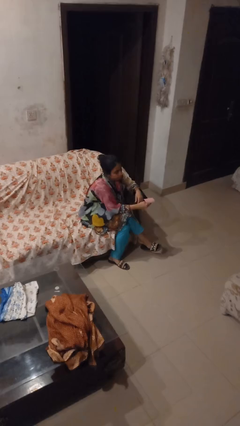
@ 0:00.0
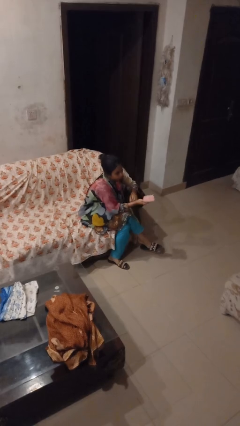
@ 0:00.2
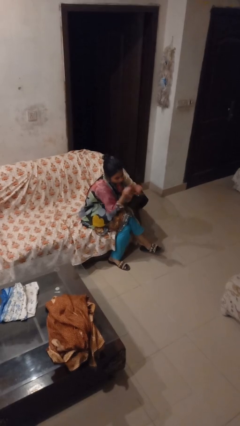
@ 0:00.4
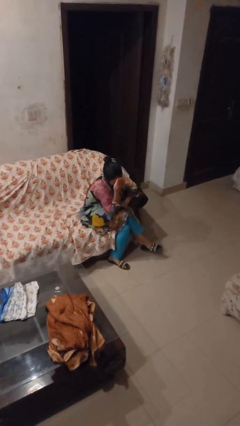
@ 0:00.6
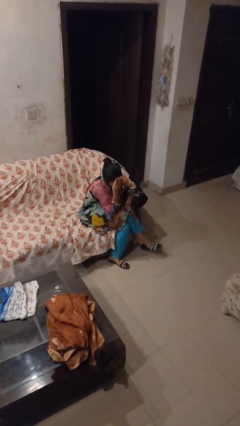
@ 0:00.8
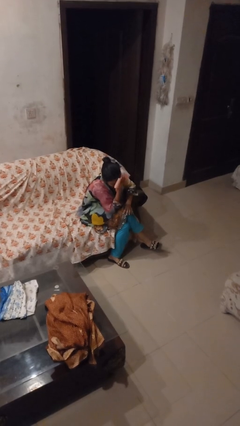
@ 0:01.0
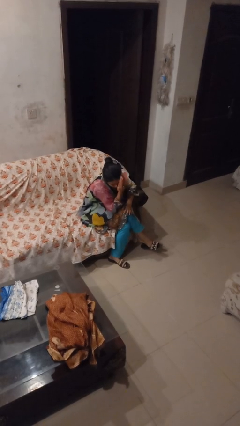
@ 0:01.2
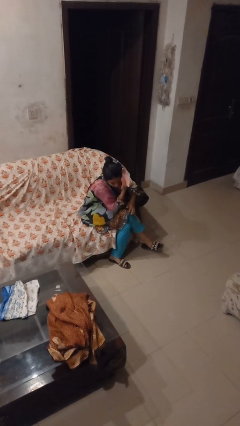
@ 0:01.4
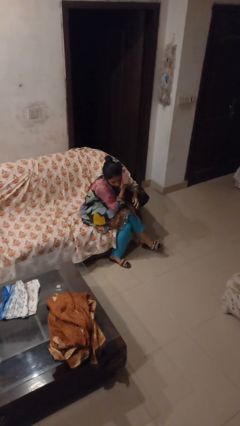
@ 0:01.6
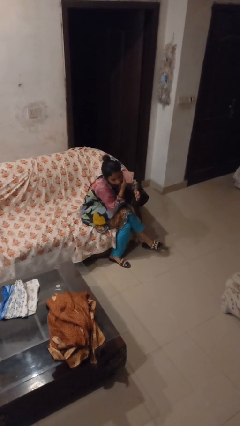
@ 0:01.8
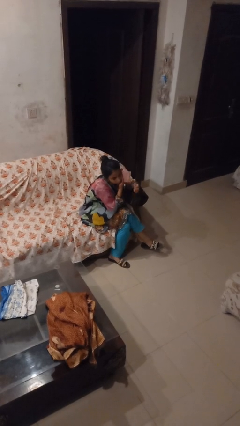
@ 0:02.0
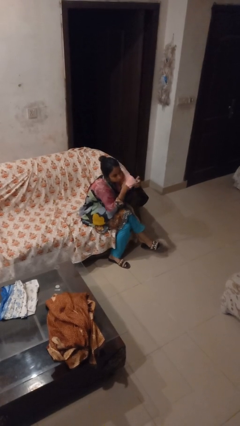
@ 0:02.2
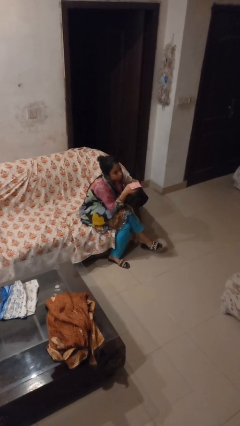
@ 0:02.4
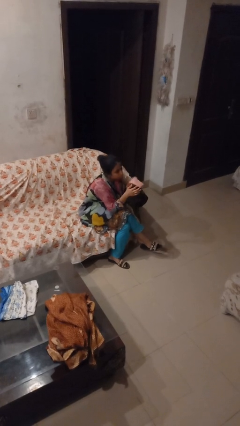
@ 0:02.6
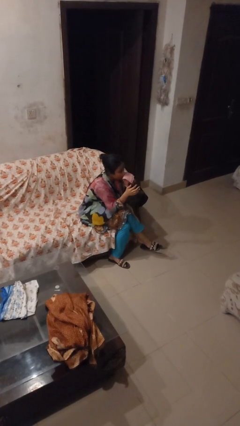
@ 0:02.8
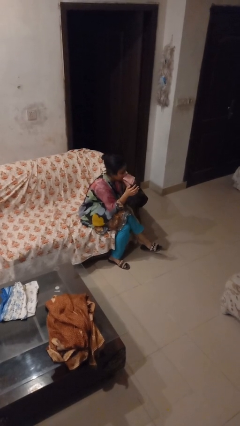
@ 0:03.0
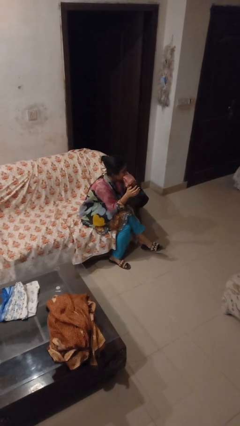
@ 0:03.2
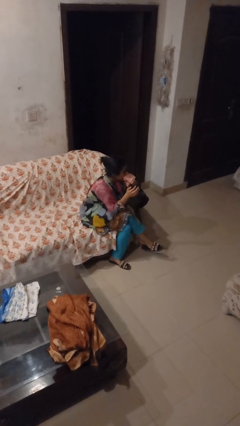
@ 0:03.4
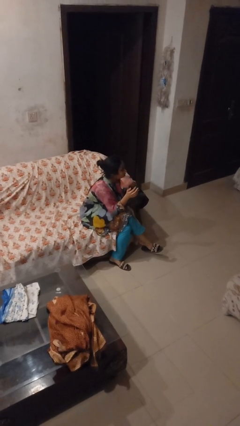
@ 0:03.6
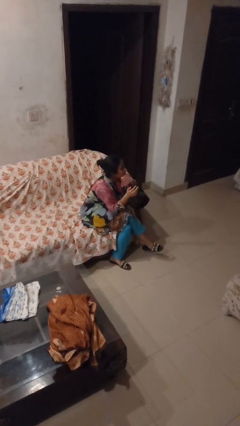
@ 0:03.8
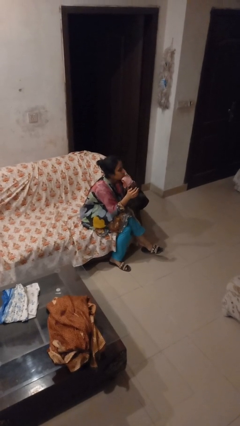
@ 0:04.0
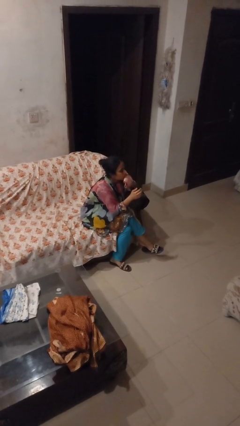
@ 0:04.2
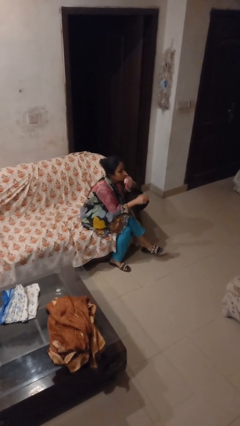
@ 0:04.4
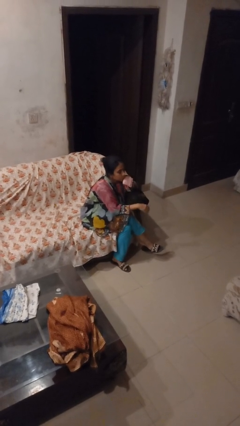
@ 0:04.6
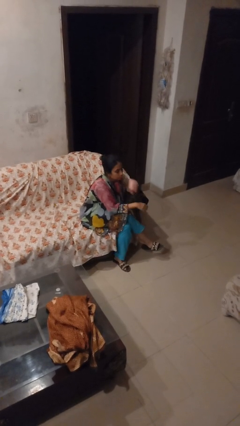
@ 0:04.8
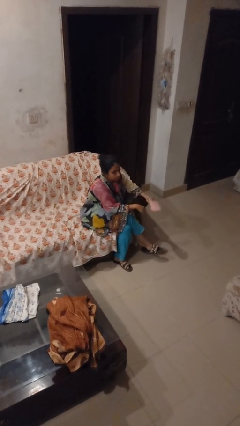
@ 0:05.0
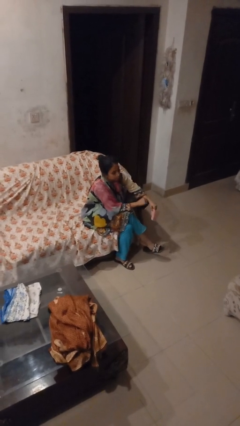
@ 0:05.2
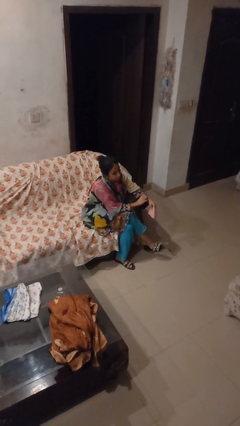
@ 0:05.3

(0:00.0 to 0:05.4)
person wipes mouth with napkin

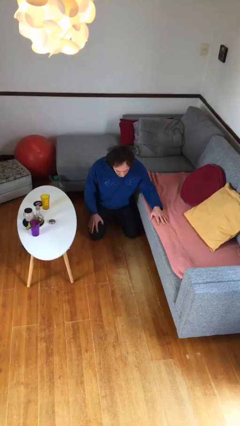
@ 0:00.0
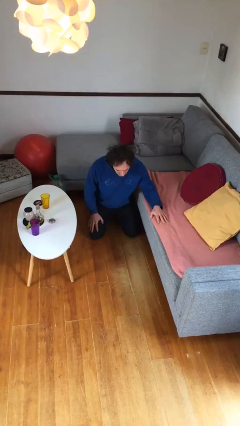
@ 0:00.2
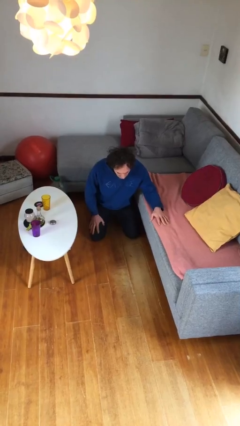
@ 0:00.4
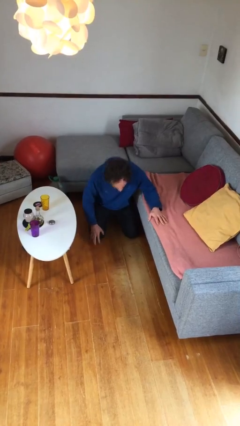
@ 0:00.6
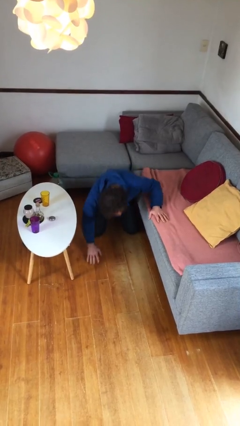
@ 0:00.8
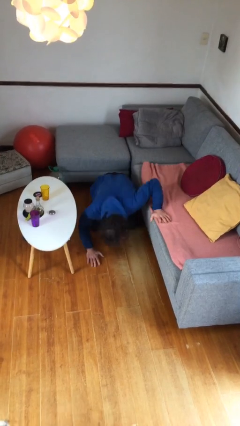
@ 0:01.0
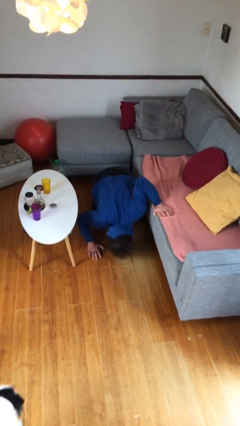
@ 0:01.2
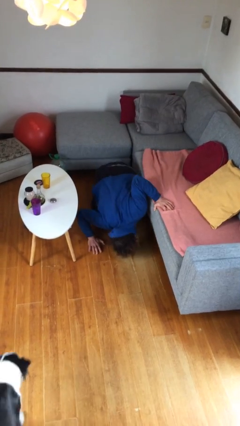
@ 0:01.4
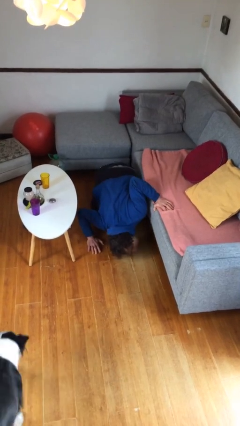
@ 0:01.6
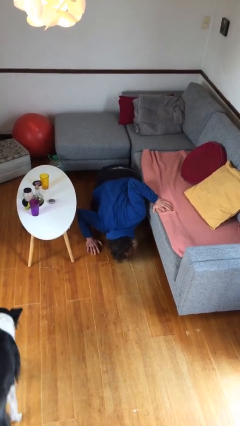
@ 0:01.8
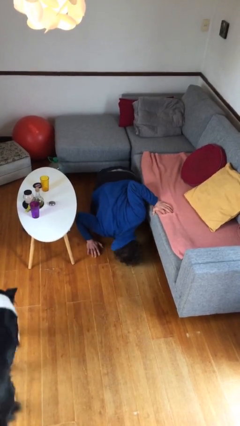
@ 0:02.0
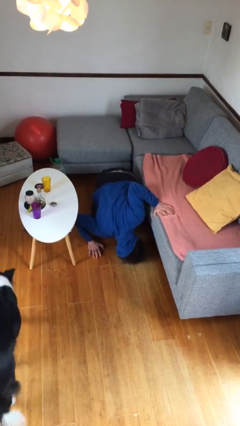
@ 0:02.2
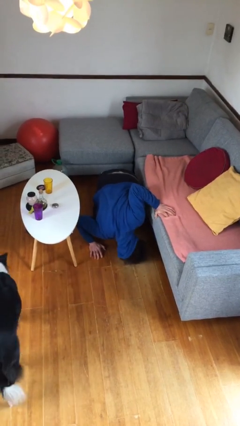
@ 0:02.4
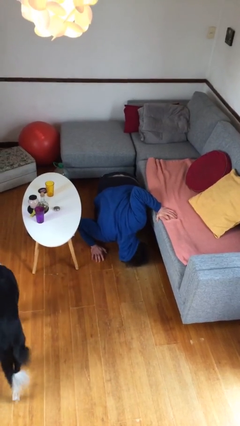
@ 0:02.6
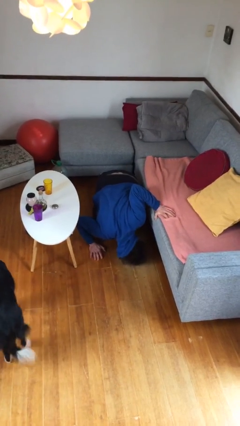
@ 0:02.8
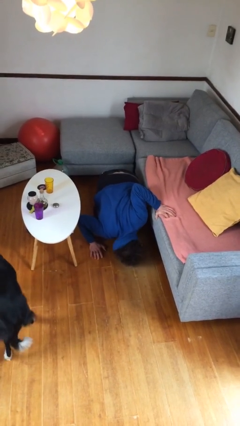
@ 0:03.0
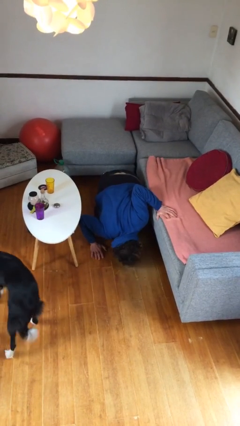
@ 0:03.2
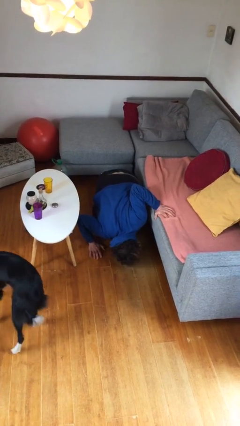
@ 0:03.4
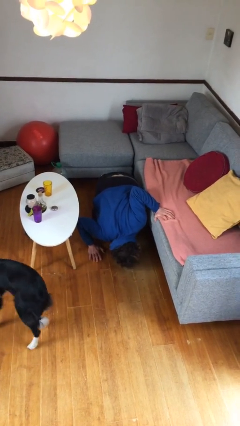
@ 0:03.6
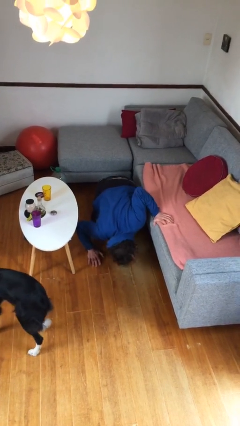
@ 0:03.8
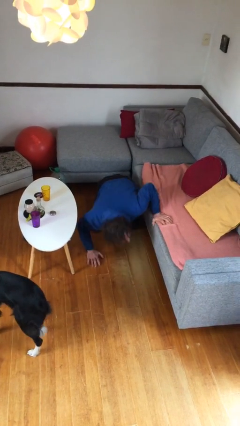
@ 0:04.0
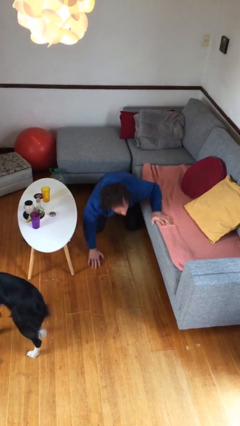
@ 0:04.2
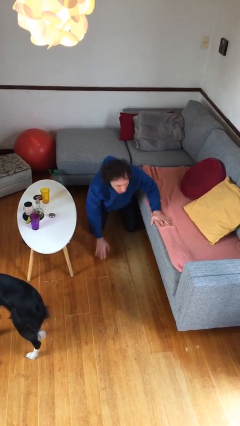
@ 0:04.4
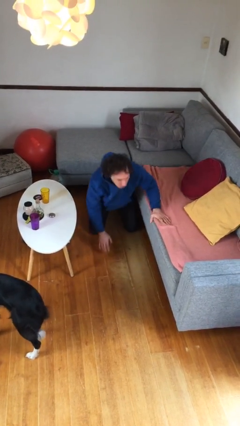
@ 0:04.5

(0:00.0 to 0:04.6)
person searches under couch

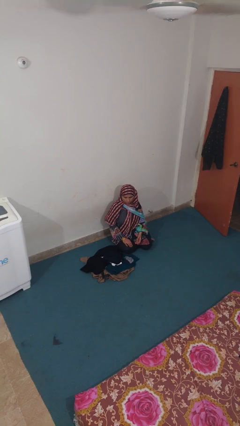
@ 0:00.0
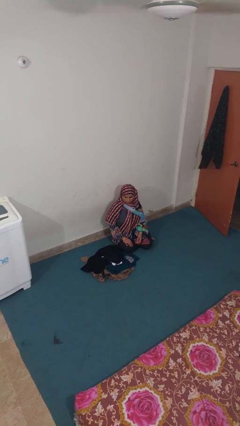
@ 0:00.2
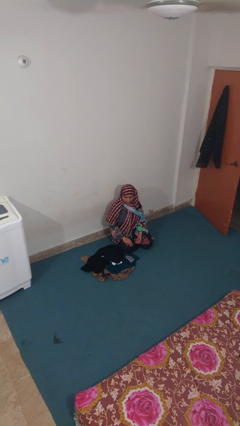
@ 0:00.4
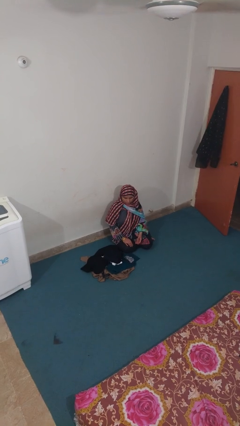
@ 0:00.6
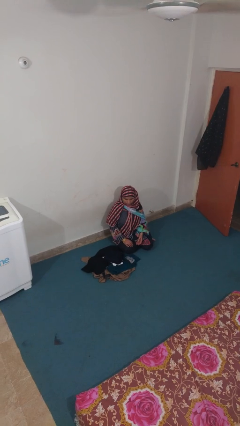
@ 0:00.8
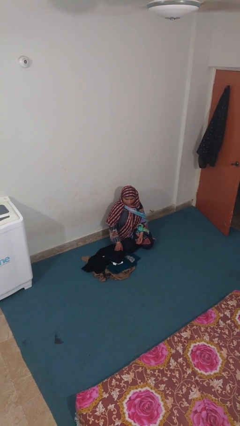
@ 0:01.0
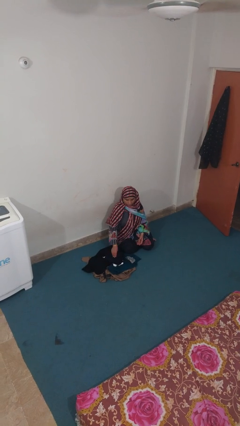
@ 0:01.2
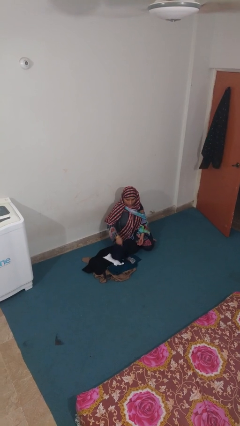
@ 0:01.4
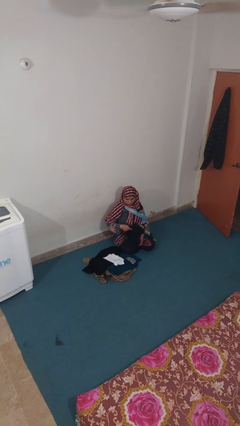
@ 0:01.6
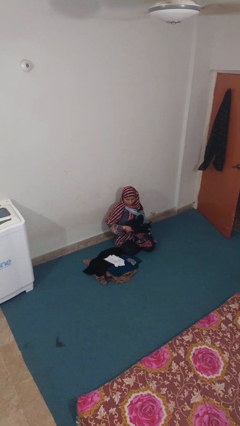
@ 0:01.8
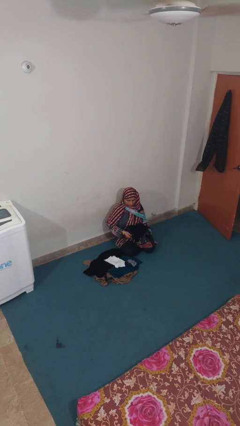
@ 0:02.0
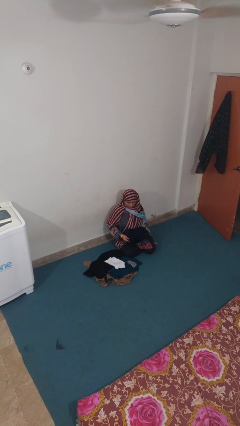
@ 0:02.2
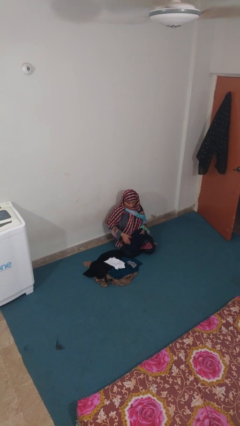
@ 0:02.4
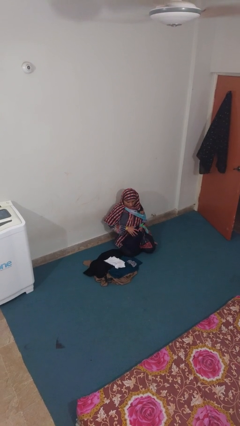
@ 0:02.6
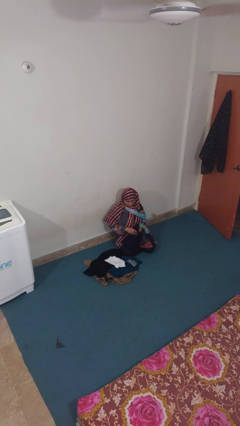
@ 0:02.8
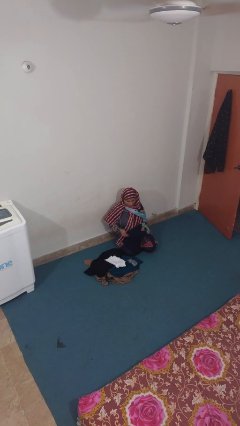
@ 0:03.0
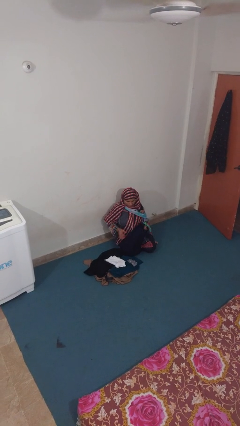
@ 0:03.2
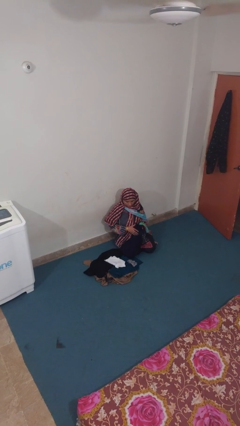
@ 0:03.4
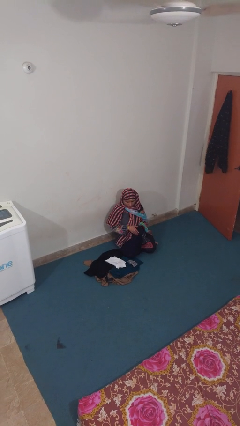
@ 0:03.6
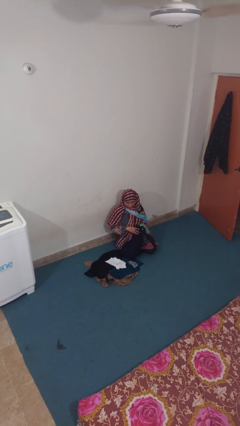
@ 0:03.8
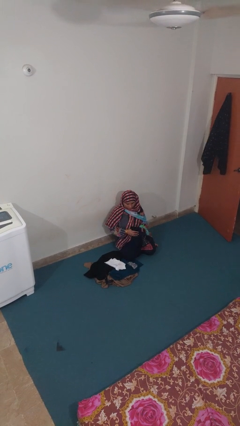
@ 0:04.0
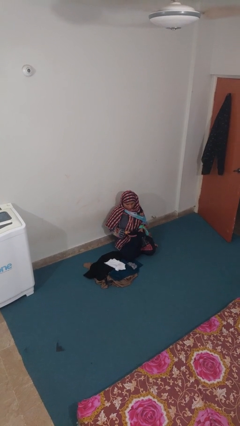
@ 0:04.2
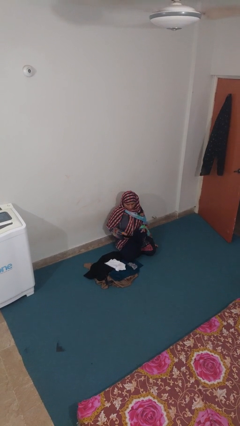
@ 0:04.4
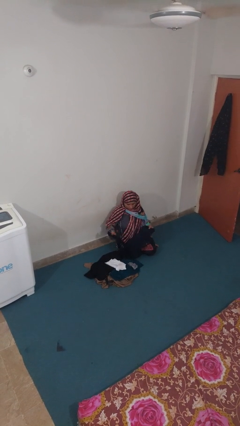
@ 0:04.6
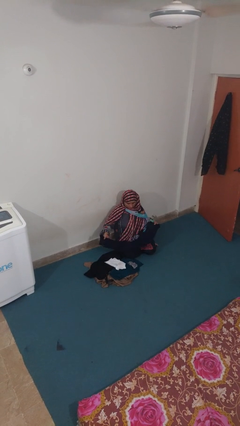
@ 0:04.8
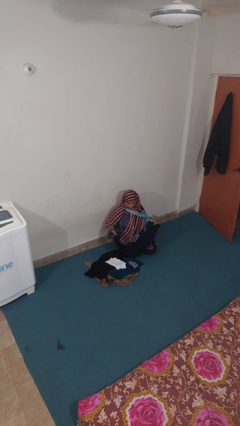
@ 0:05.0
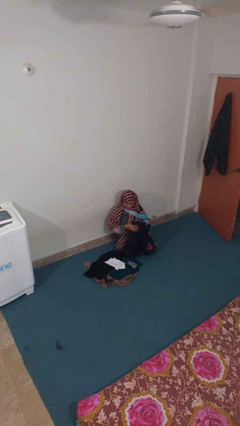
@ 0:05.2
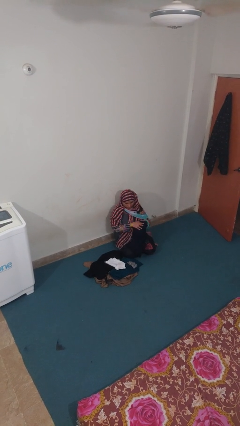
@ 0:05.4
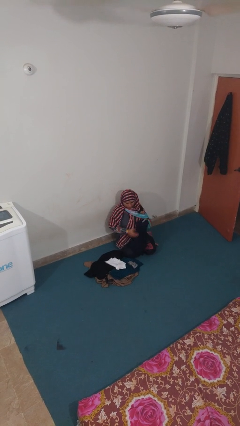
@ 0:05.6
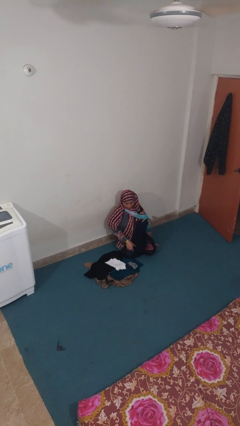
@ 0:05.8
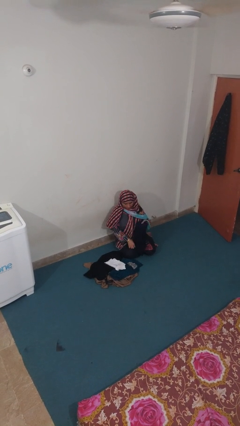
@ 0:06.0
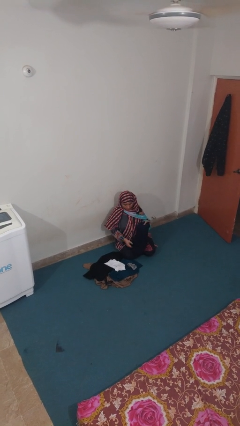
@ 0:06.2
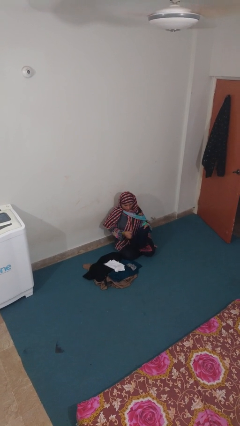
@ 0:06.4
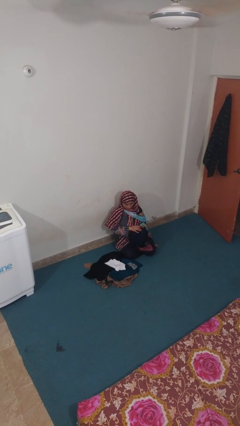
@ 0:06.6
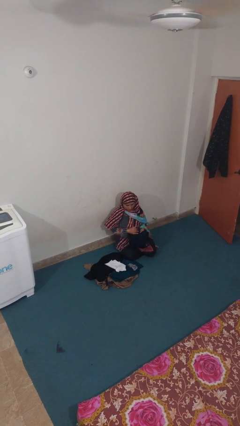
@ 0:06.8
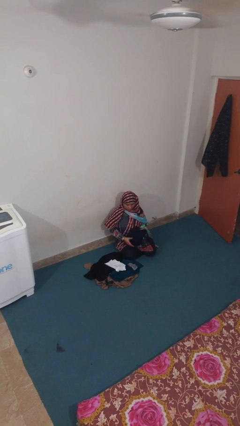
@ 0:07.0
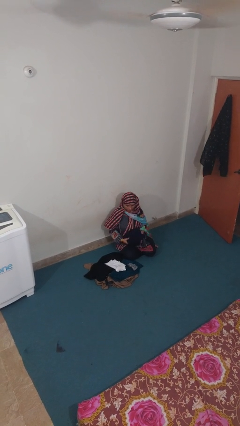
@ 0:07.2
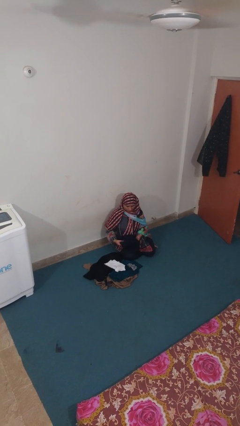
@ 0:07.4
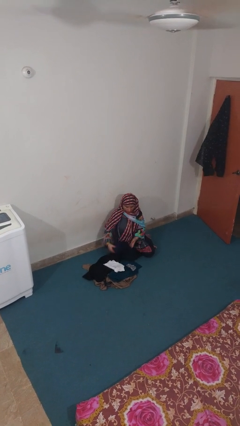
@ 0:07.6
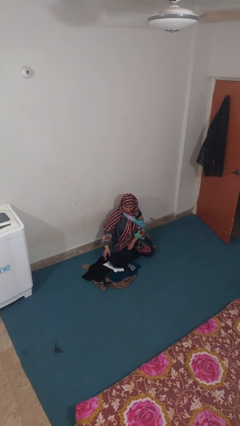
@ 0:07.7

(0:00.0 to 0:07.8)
person folds pants

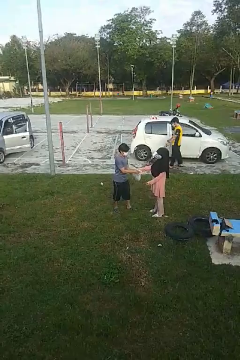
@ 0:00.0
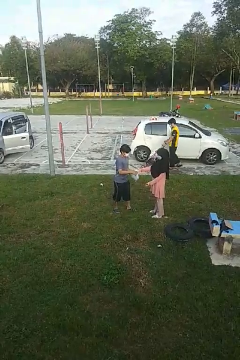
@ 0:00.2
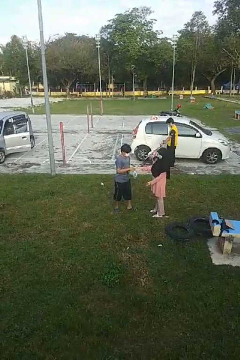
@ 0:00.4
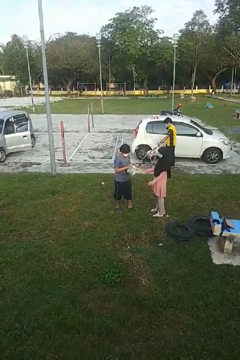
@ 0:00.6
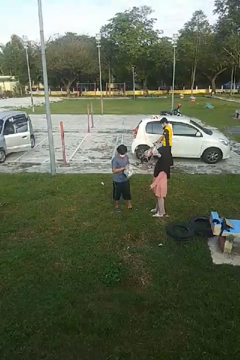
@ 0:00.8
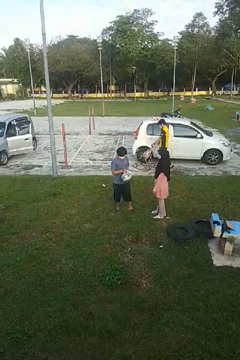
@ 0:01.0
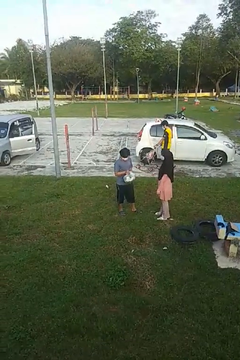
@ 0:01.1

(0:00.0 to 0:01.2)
person transfers object to person
